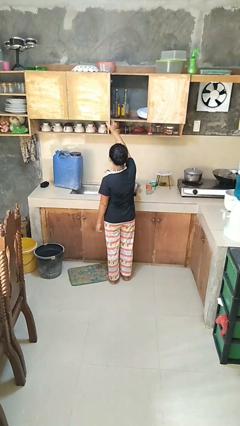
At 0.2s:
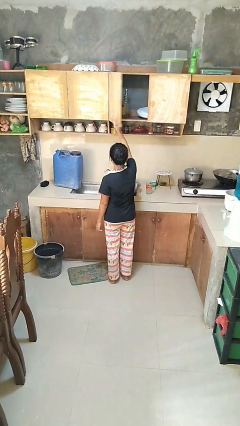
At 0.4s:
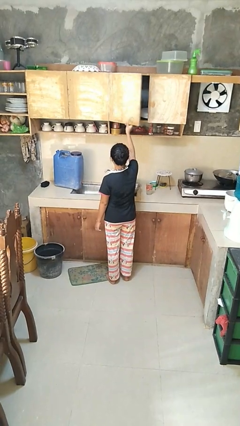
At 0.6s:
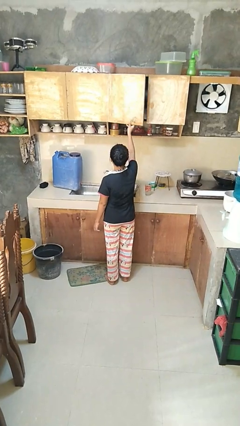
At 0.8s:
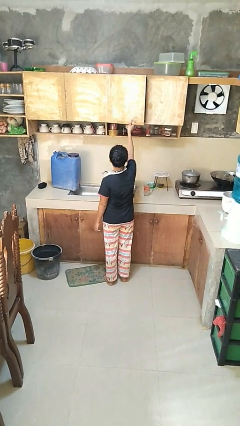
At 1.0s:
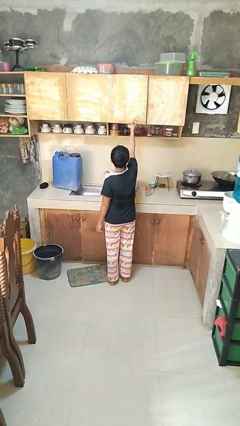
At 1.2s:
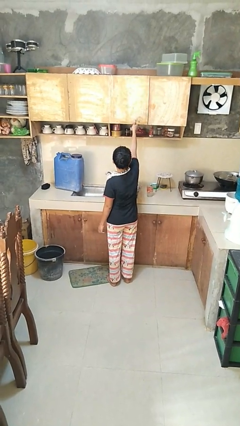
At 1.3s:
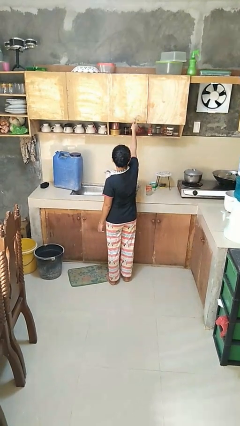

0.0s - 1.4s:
person closes cabinet

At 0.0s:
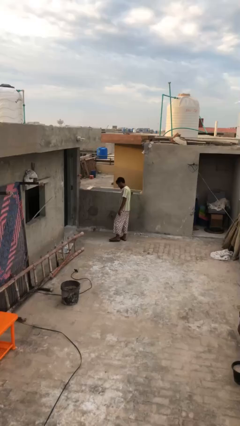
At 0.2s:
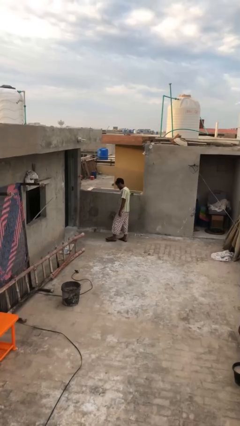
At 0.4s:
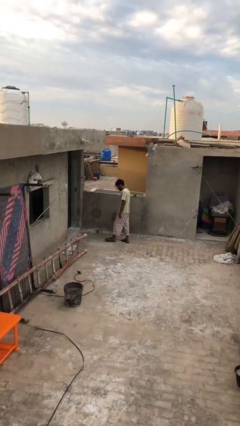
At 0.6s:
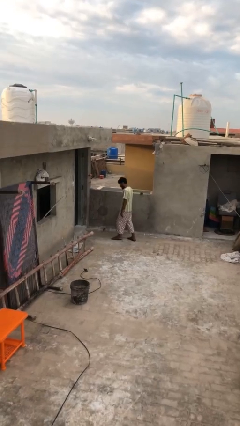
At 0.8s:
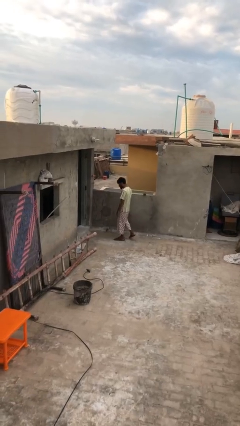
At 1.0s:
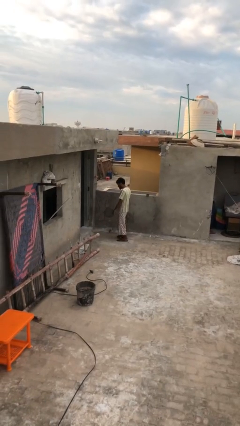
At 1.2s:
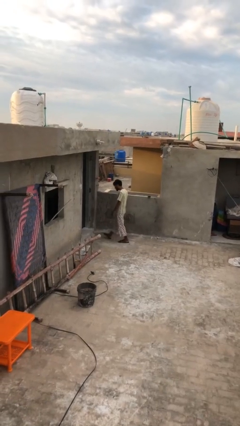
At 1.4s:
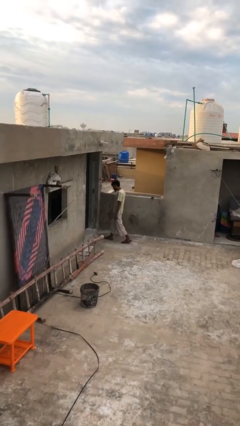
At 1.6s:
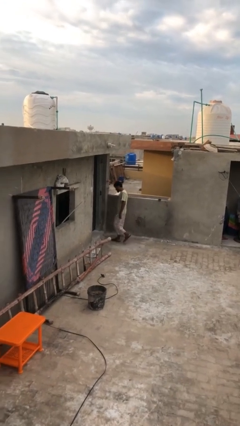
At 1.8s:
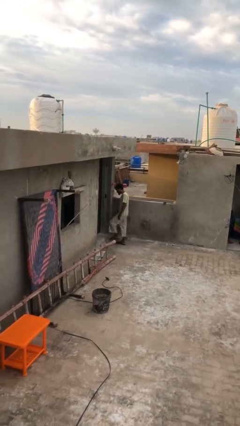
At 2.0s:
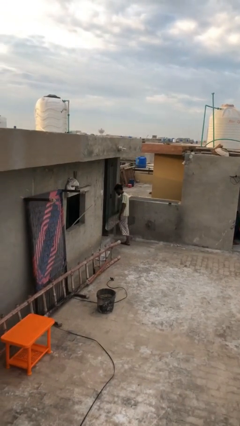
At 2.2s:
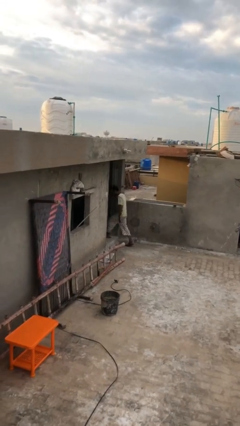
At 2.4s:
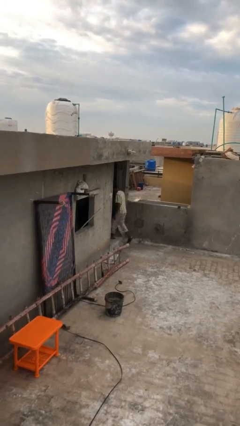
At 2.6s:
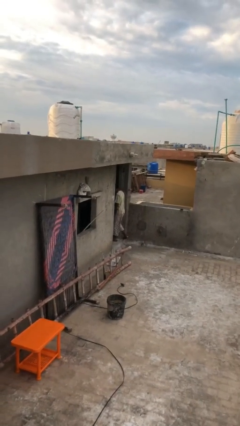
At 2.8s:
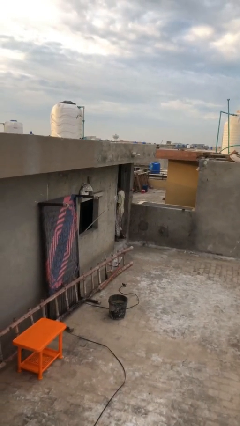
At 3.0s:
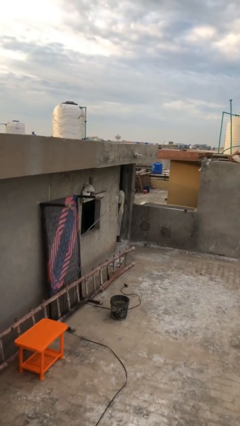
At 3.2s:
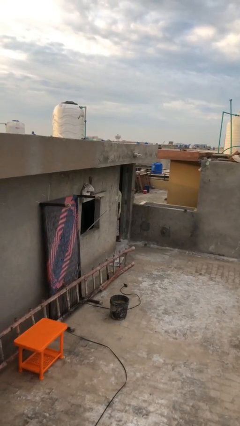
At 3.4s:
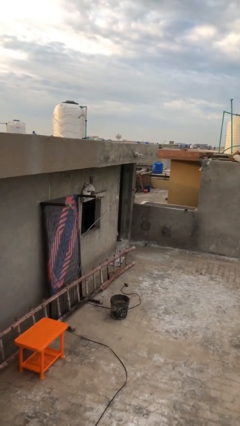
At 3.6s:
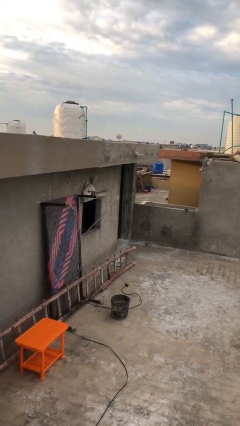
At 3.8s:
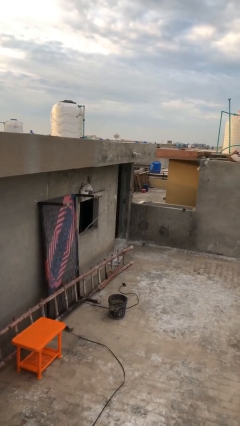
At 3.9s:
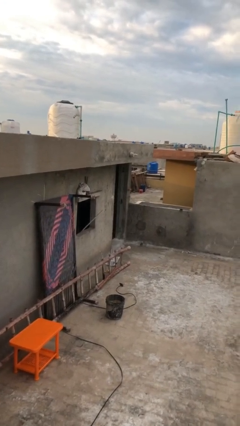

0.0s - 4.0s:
person exits scene through structure

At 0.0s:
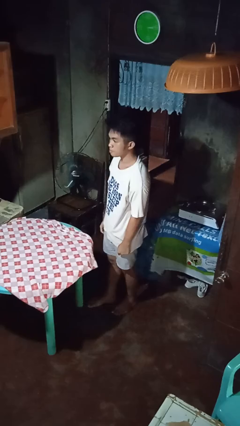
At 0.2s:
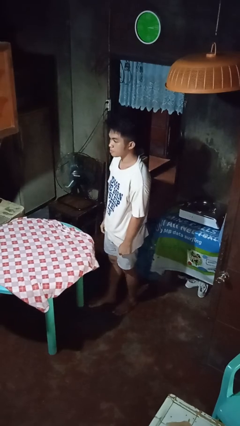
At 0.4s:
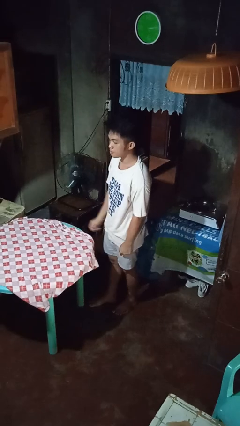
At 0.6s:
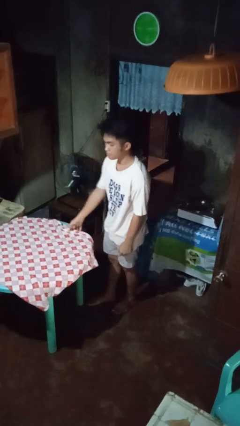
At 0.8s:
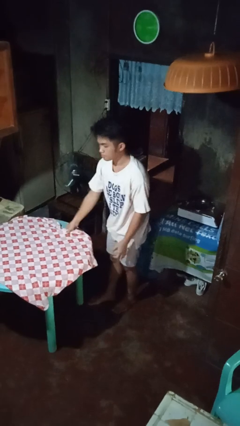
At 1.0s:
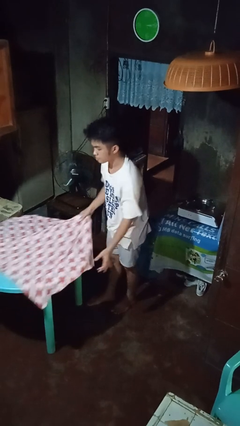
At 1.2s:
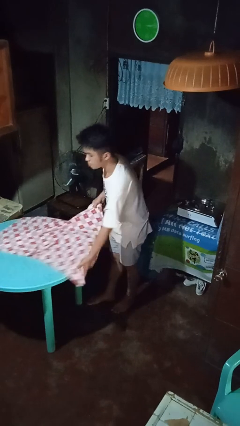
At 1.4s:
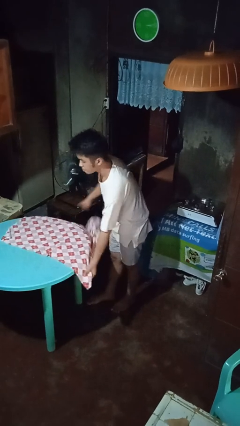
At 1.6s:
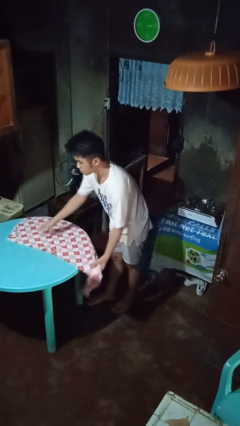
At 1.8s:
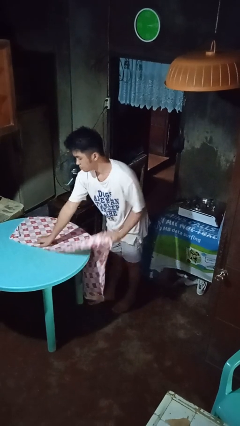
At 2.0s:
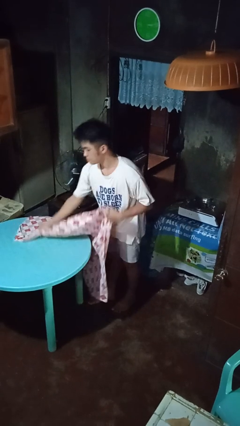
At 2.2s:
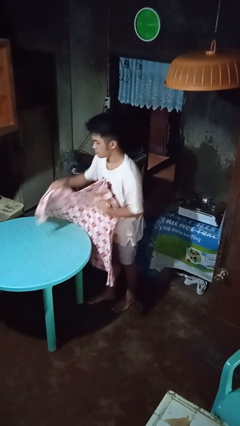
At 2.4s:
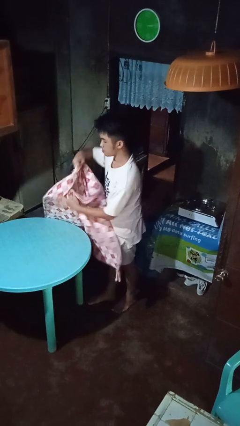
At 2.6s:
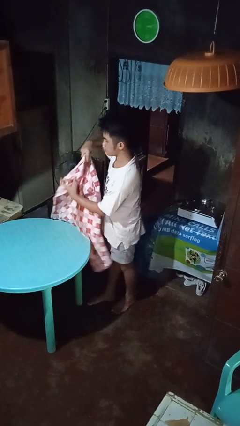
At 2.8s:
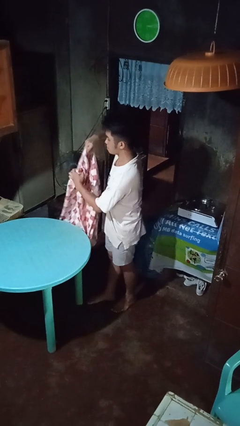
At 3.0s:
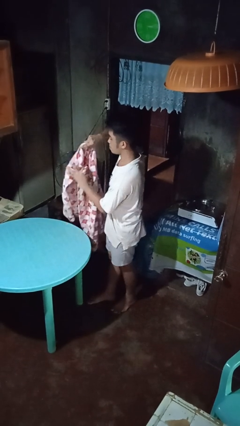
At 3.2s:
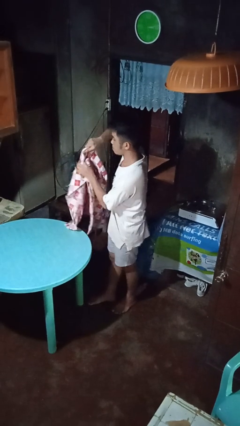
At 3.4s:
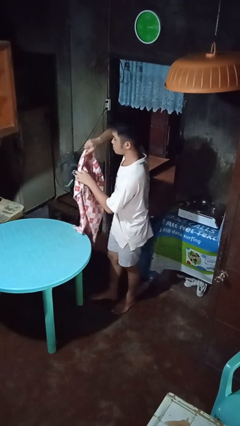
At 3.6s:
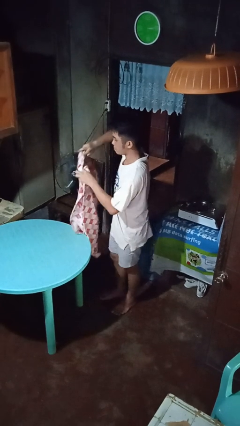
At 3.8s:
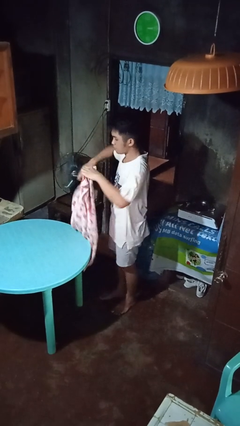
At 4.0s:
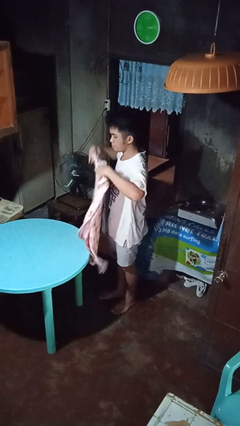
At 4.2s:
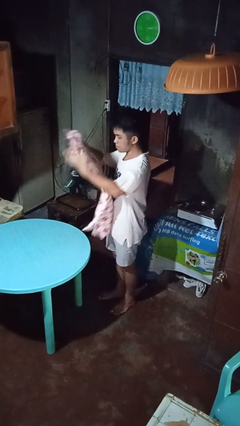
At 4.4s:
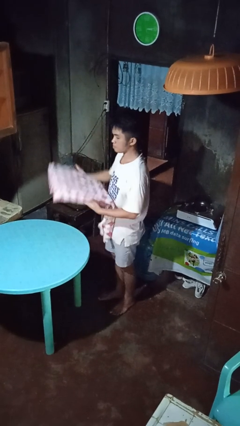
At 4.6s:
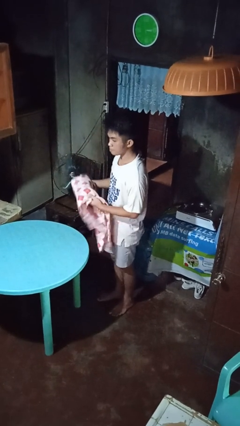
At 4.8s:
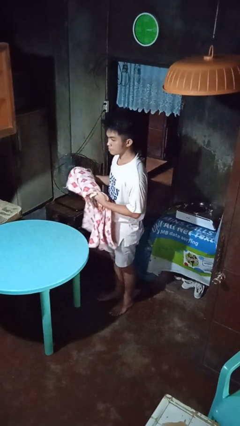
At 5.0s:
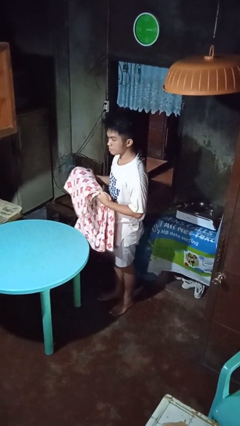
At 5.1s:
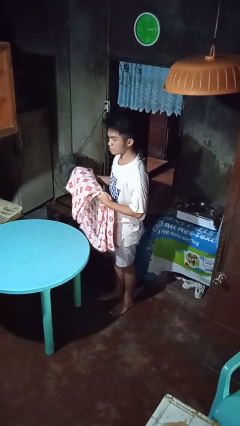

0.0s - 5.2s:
person folds tablecloth

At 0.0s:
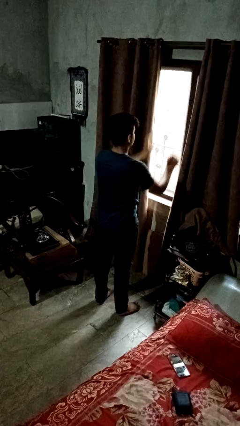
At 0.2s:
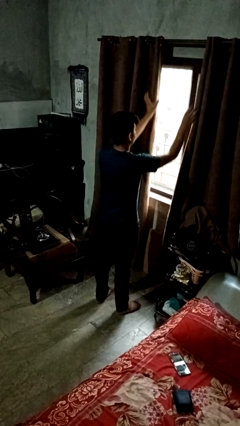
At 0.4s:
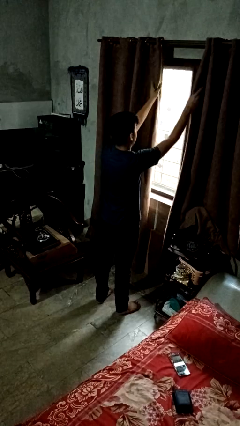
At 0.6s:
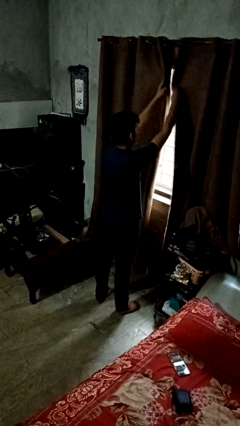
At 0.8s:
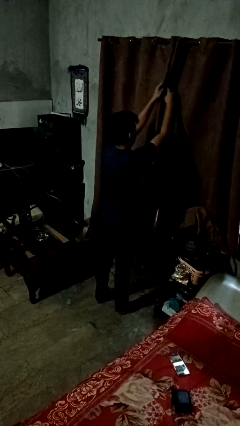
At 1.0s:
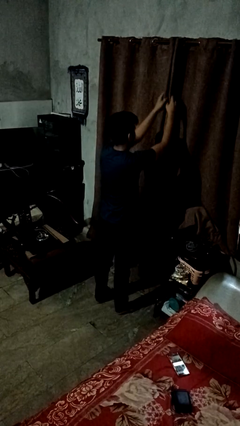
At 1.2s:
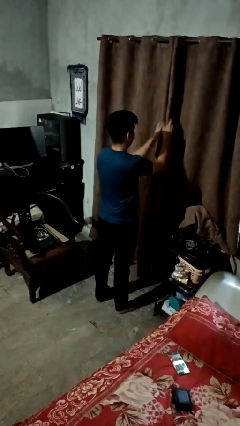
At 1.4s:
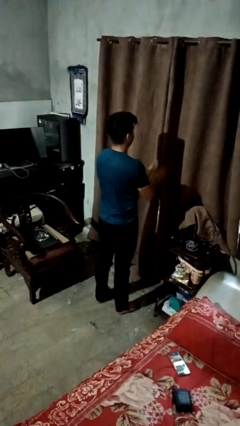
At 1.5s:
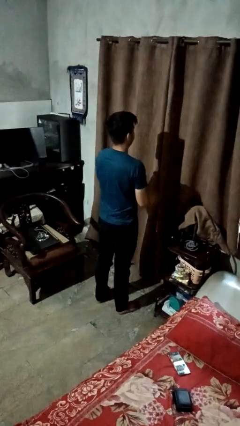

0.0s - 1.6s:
person closes curtains

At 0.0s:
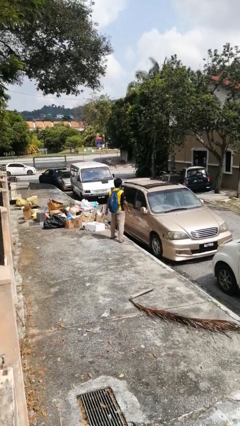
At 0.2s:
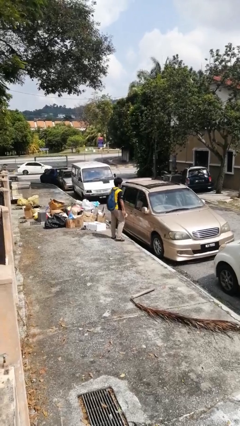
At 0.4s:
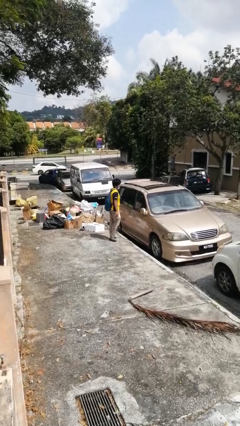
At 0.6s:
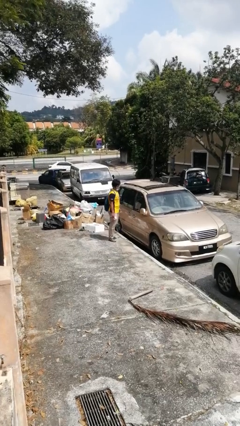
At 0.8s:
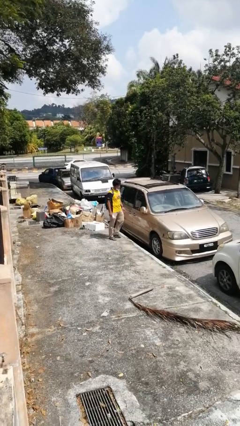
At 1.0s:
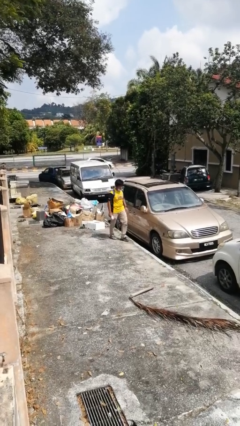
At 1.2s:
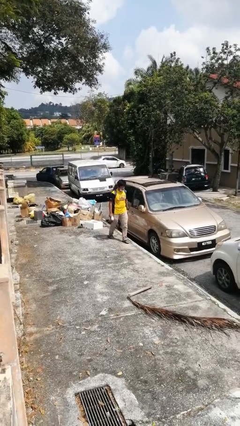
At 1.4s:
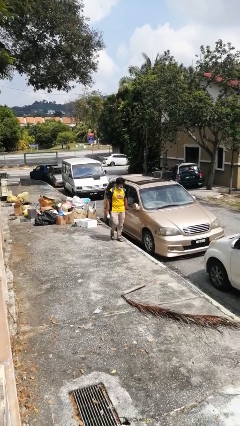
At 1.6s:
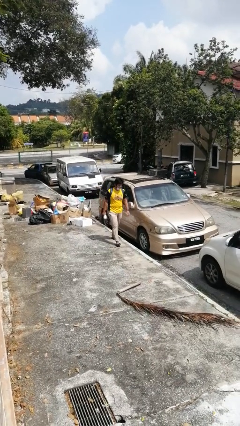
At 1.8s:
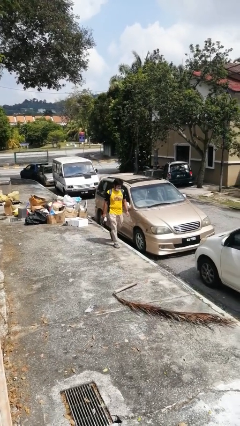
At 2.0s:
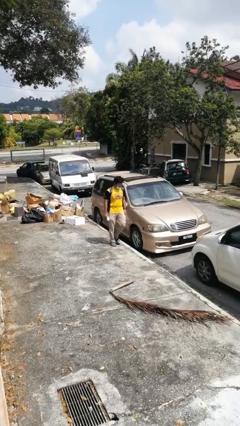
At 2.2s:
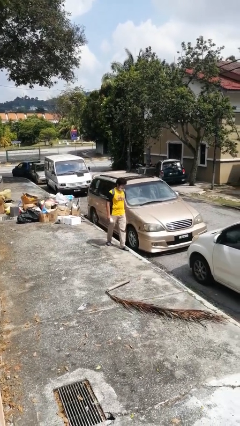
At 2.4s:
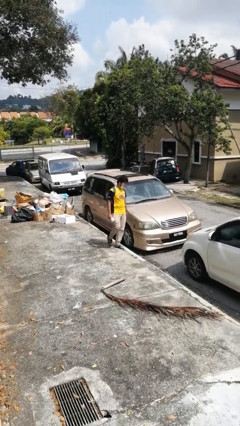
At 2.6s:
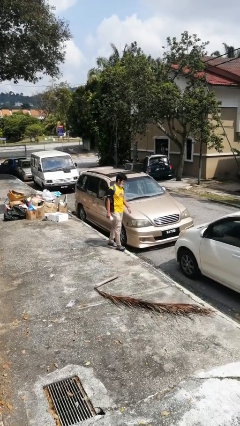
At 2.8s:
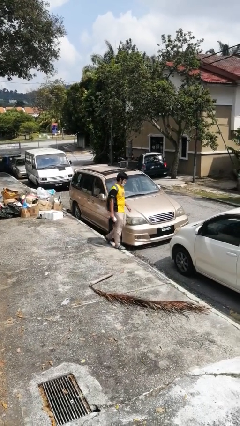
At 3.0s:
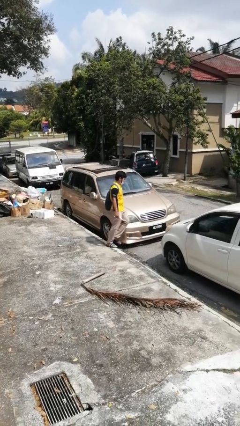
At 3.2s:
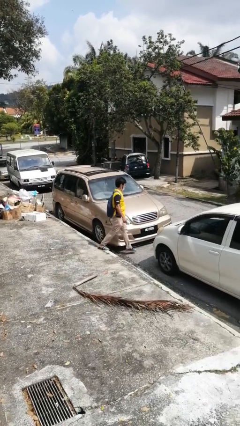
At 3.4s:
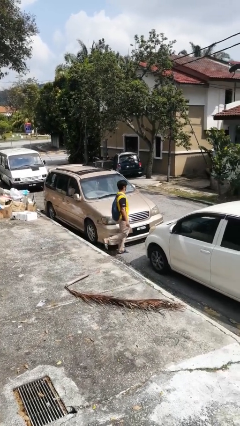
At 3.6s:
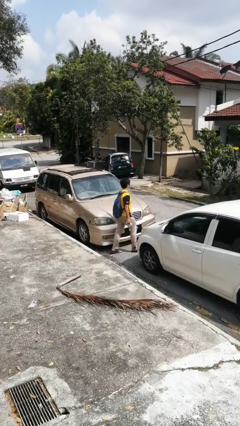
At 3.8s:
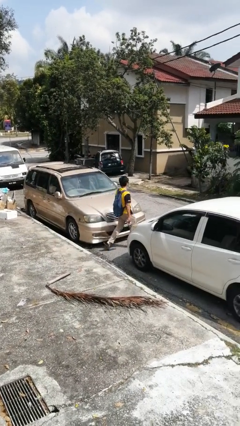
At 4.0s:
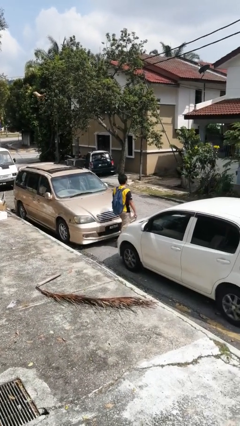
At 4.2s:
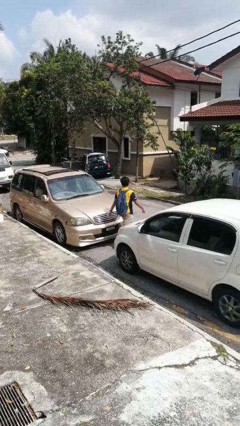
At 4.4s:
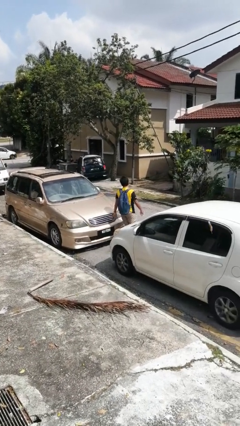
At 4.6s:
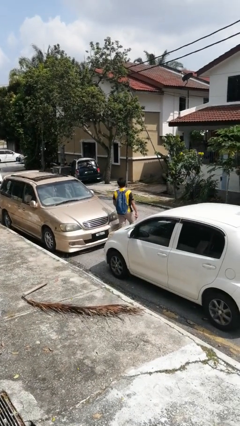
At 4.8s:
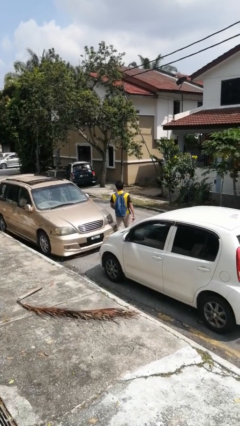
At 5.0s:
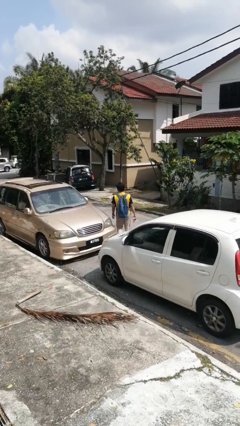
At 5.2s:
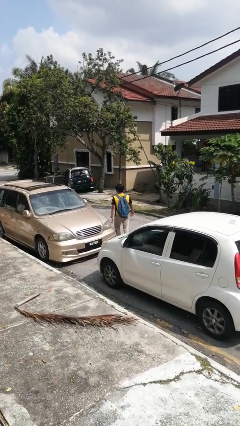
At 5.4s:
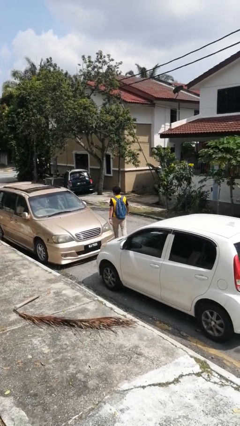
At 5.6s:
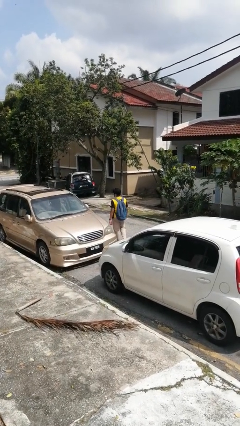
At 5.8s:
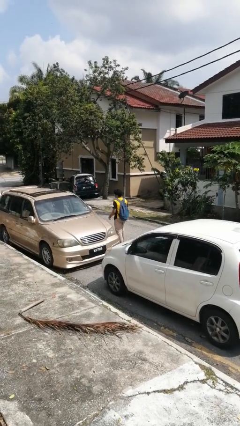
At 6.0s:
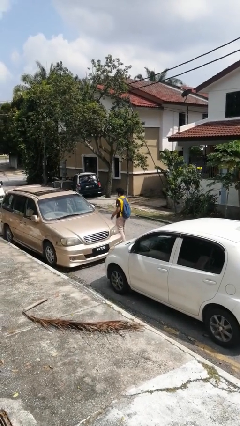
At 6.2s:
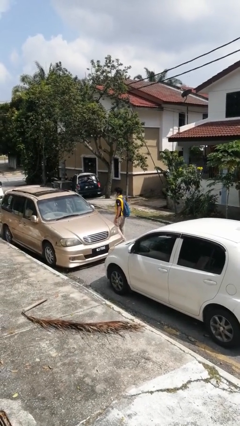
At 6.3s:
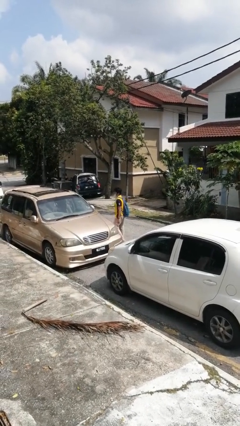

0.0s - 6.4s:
person walks around car
